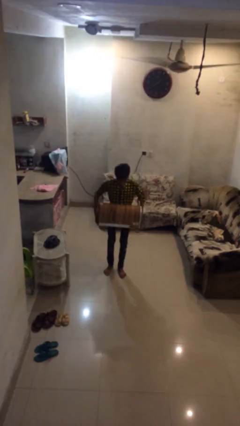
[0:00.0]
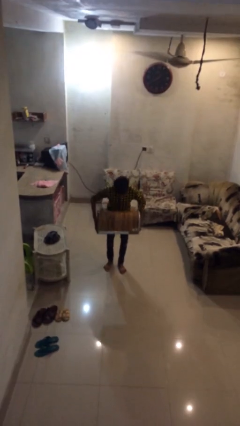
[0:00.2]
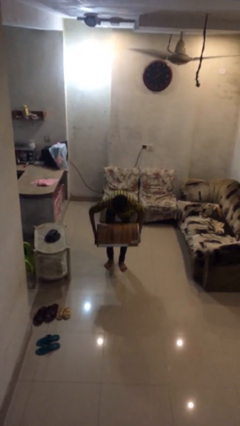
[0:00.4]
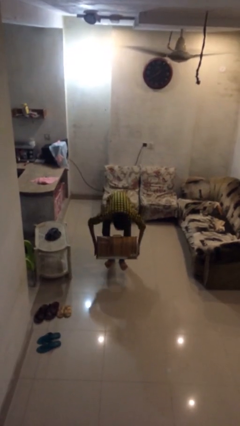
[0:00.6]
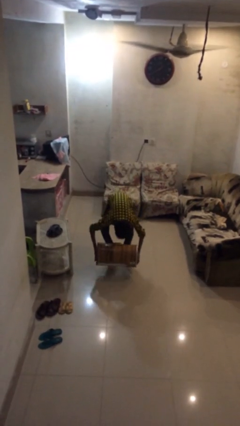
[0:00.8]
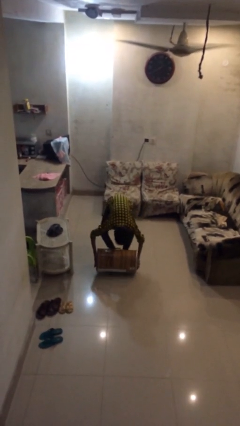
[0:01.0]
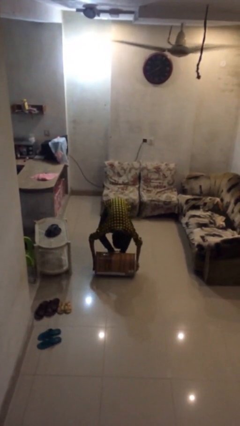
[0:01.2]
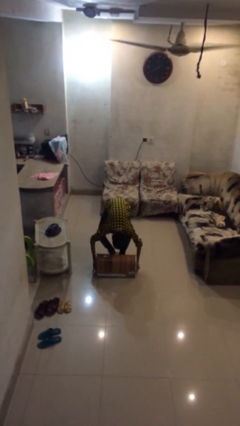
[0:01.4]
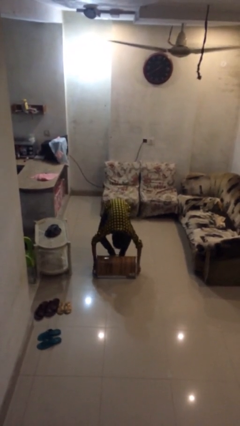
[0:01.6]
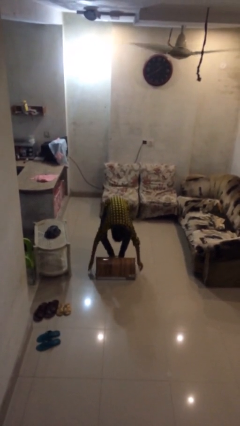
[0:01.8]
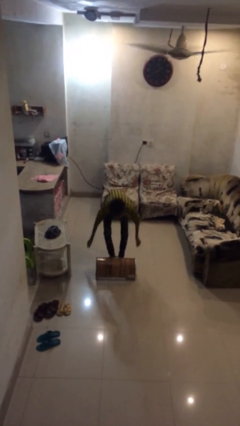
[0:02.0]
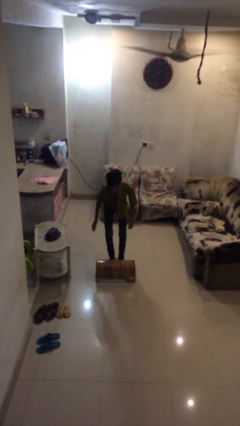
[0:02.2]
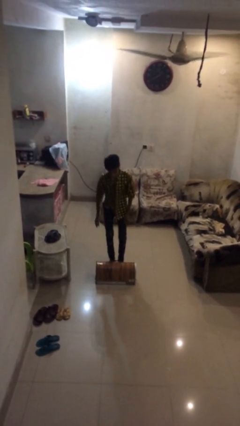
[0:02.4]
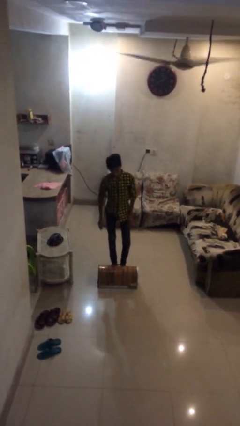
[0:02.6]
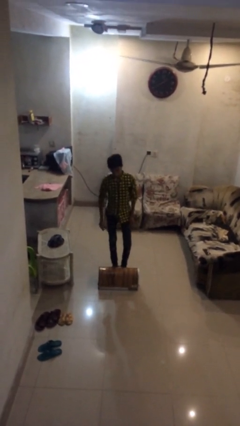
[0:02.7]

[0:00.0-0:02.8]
person puts down object on floor

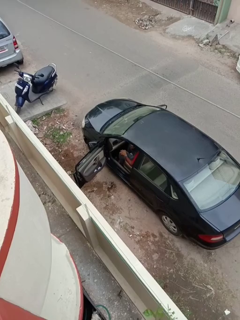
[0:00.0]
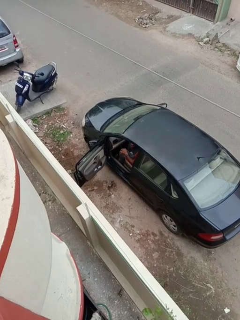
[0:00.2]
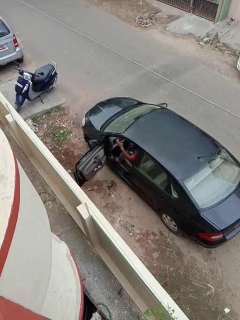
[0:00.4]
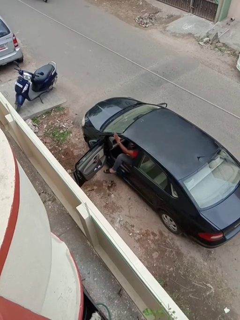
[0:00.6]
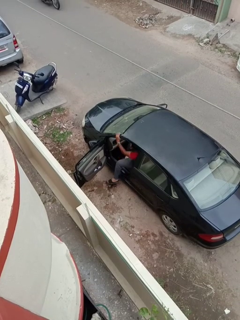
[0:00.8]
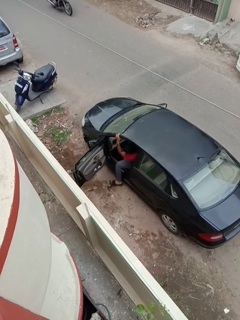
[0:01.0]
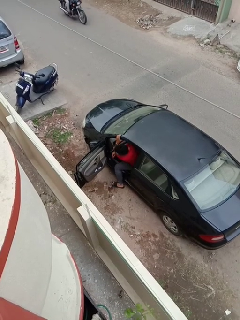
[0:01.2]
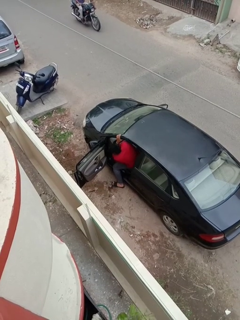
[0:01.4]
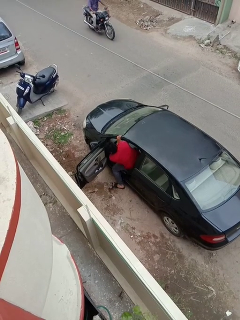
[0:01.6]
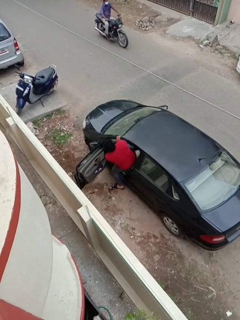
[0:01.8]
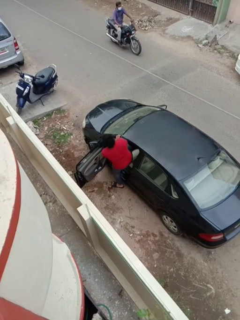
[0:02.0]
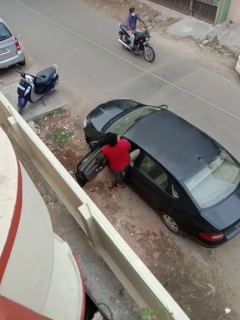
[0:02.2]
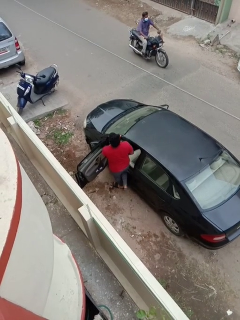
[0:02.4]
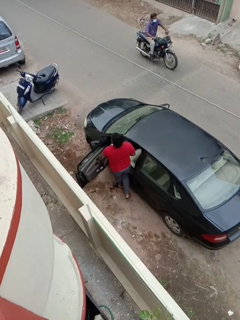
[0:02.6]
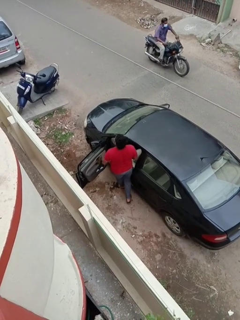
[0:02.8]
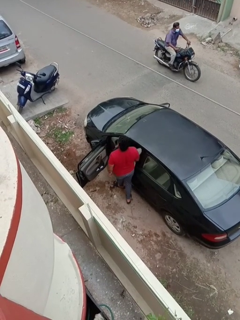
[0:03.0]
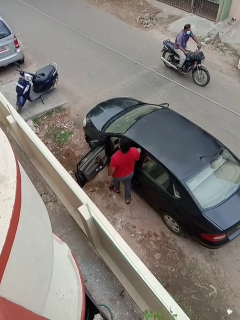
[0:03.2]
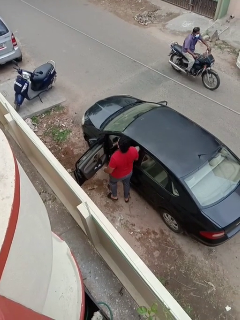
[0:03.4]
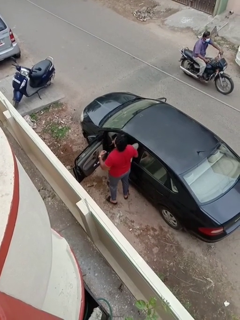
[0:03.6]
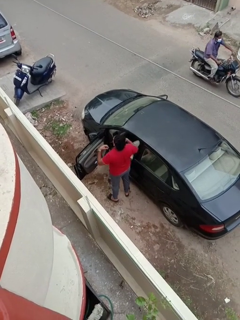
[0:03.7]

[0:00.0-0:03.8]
person exits car

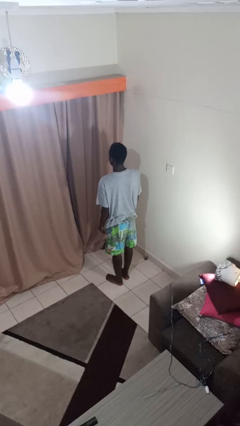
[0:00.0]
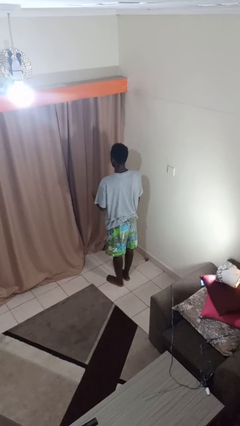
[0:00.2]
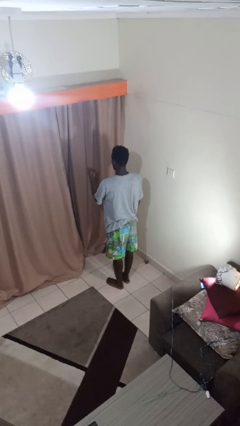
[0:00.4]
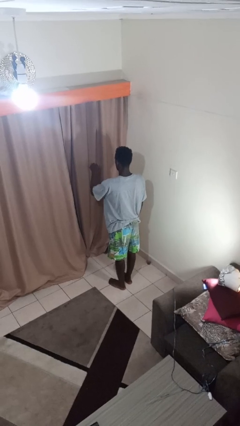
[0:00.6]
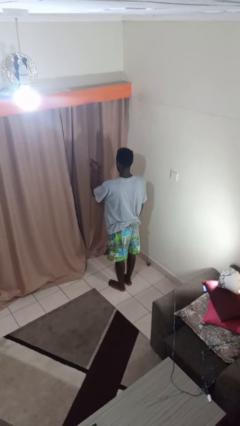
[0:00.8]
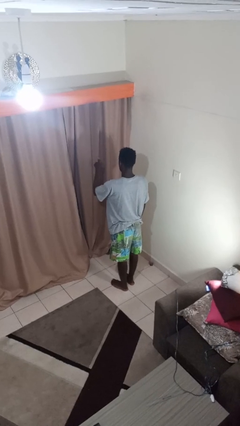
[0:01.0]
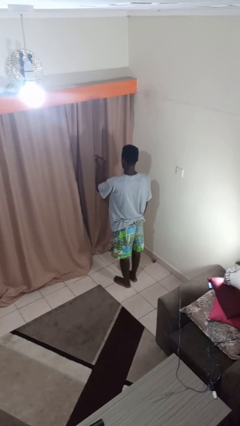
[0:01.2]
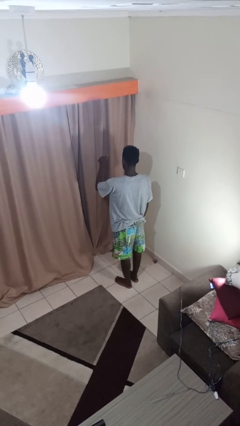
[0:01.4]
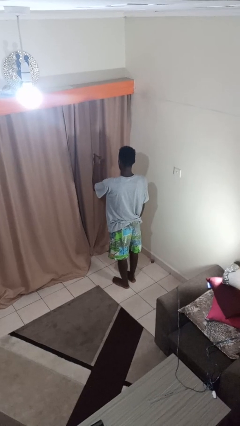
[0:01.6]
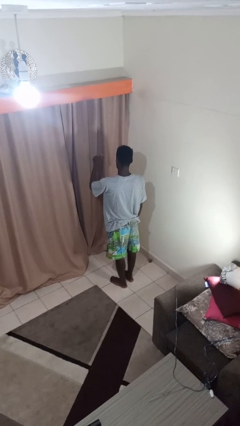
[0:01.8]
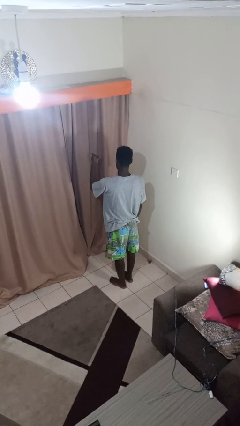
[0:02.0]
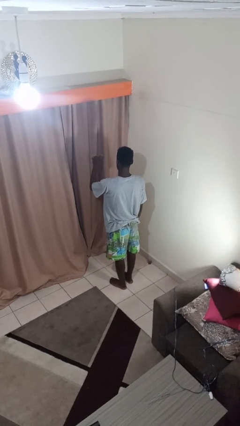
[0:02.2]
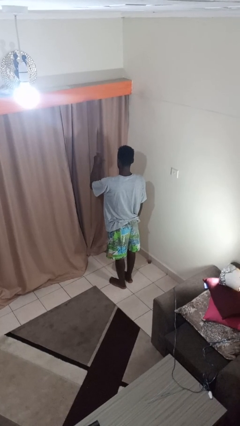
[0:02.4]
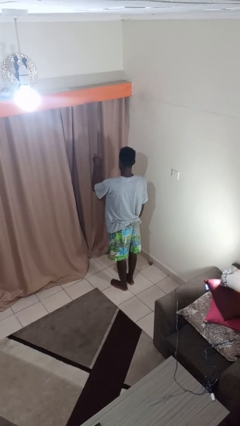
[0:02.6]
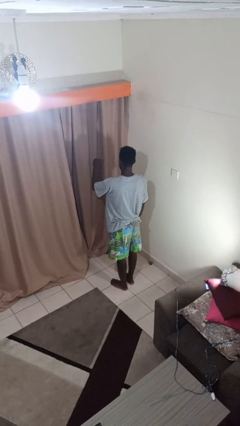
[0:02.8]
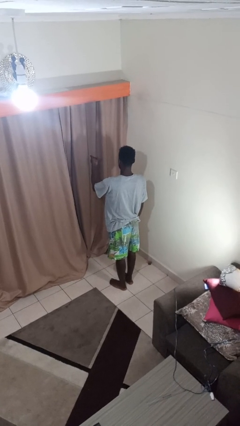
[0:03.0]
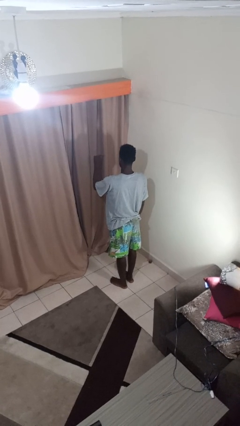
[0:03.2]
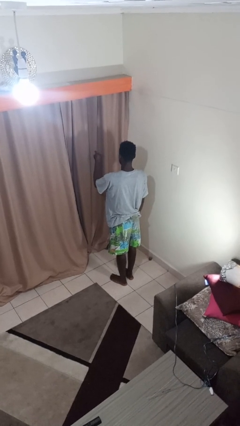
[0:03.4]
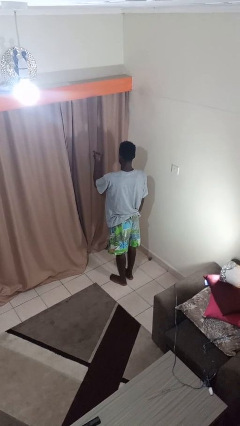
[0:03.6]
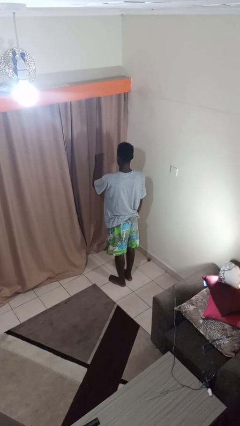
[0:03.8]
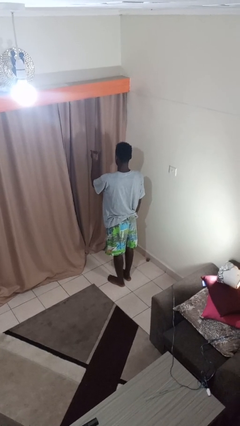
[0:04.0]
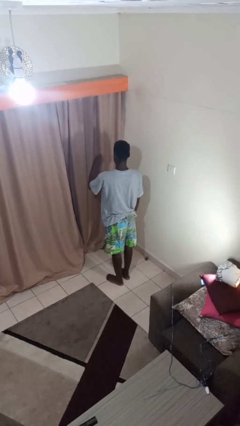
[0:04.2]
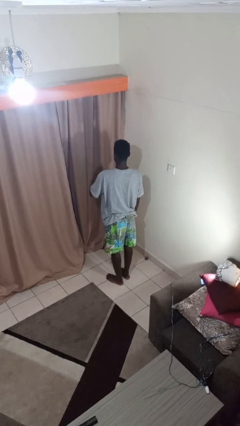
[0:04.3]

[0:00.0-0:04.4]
person gestures hang loose

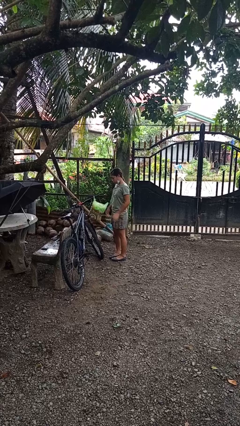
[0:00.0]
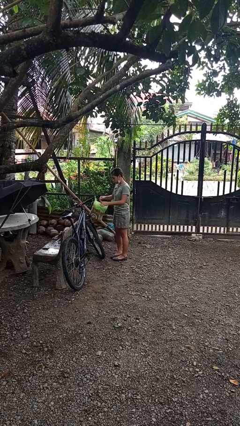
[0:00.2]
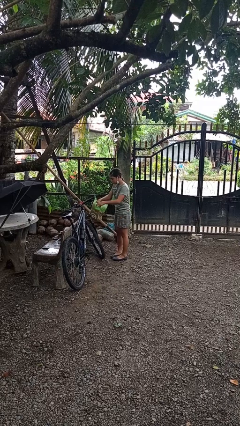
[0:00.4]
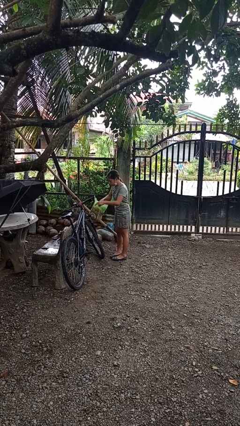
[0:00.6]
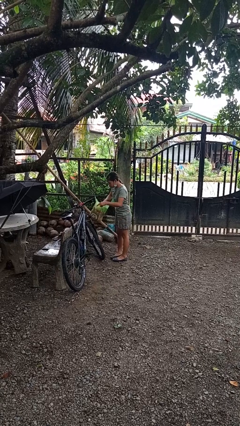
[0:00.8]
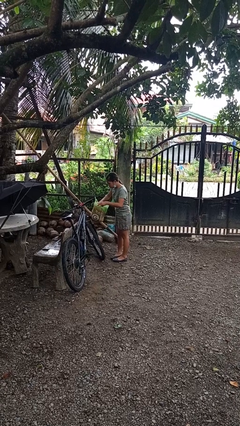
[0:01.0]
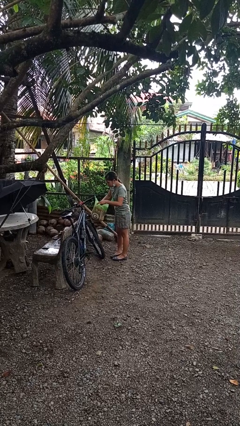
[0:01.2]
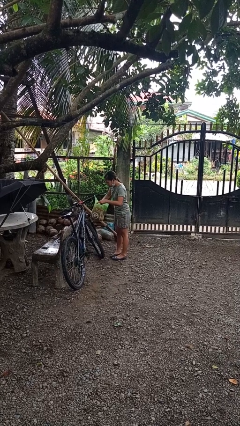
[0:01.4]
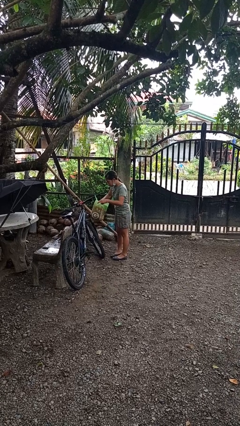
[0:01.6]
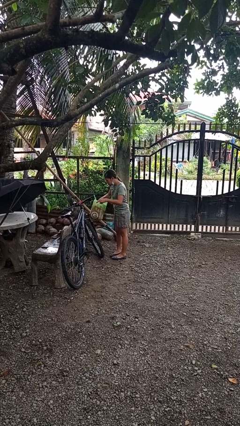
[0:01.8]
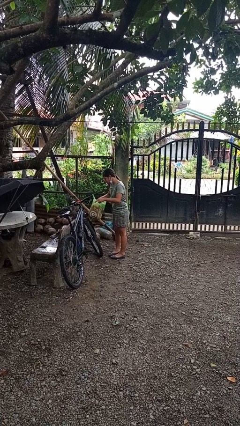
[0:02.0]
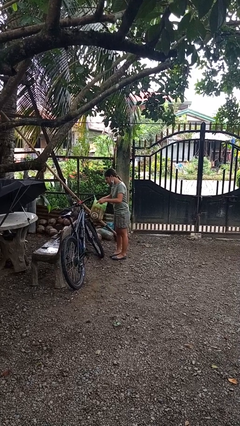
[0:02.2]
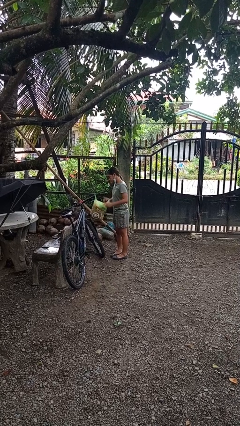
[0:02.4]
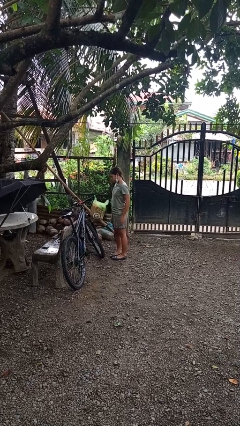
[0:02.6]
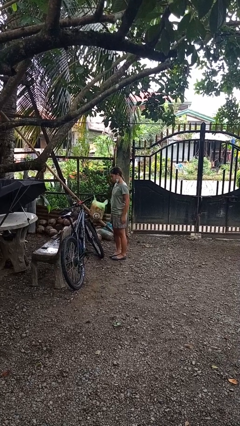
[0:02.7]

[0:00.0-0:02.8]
person searches in bag

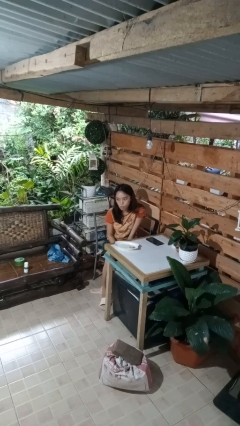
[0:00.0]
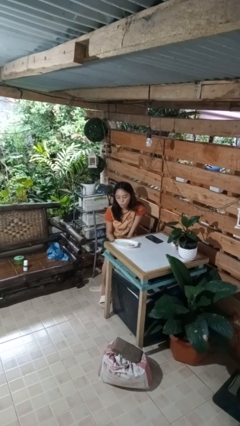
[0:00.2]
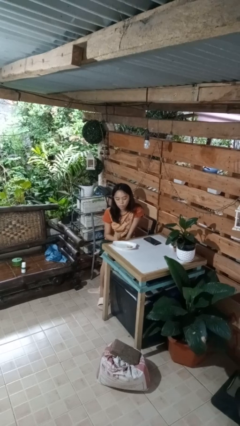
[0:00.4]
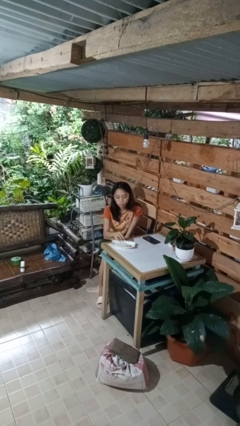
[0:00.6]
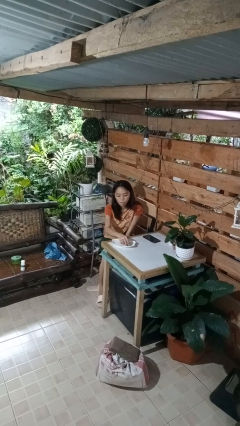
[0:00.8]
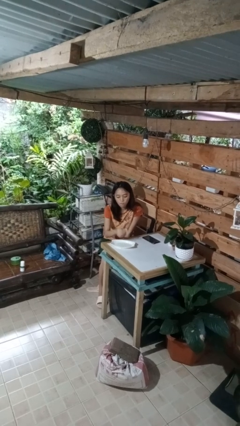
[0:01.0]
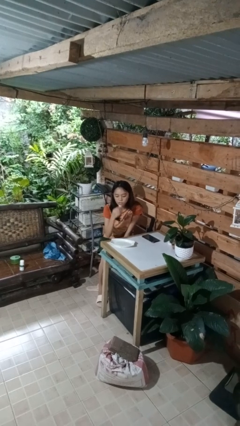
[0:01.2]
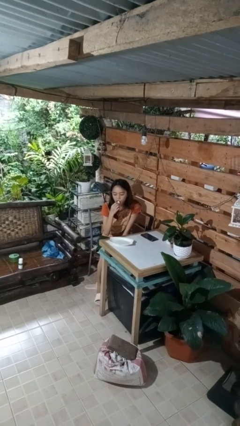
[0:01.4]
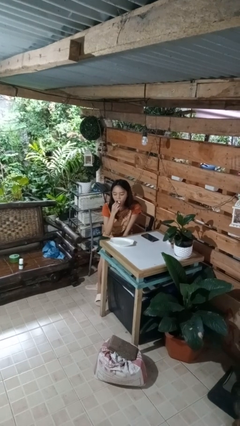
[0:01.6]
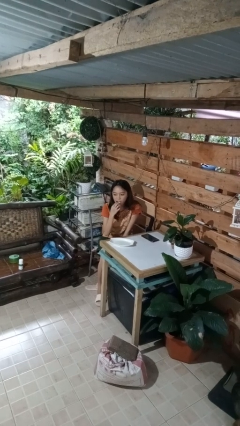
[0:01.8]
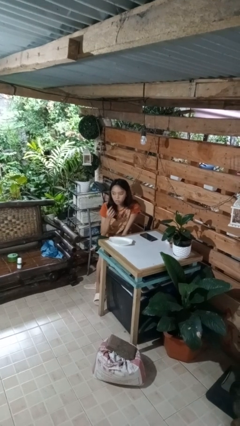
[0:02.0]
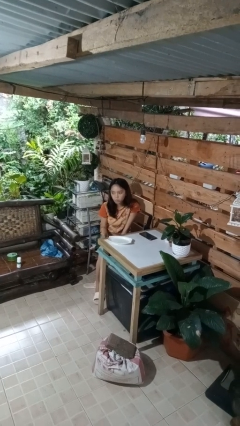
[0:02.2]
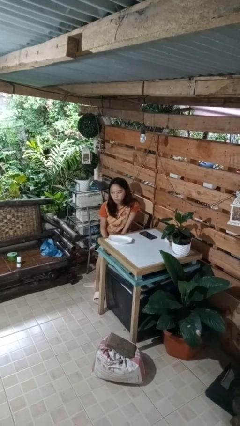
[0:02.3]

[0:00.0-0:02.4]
person eats with hands

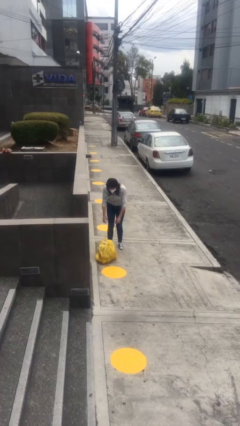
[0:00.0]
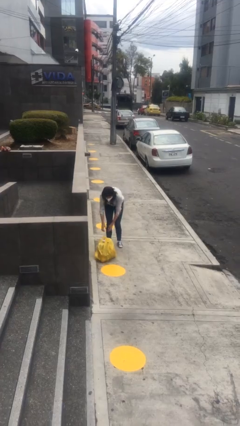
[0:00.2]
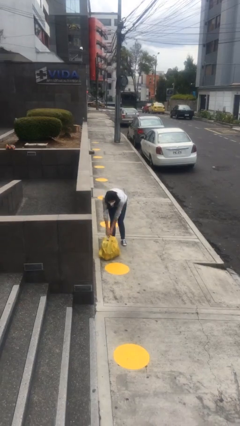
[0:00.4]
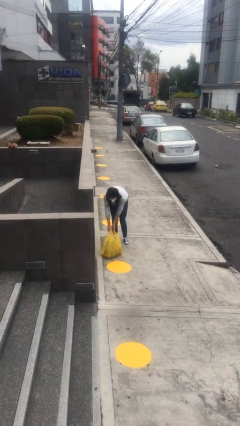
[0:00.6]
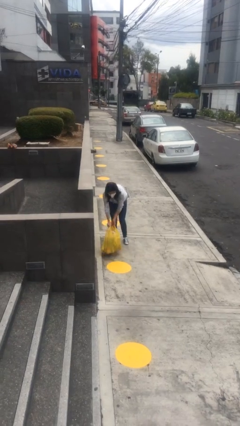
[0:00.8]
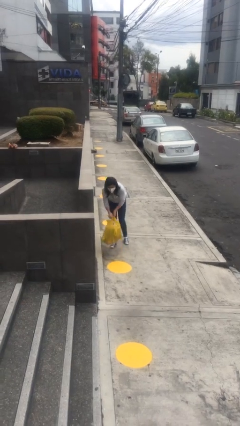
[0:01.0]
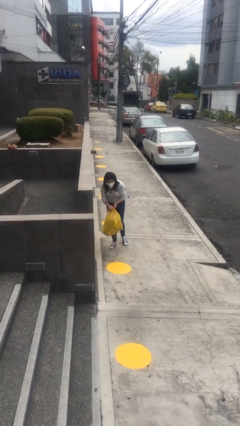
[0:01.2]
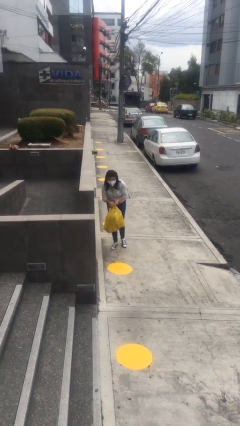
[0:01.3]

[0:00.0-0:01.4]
person picks up object from floor

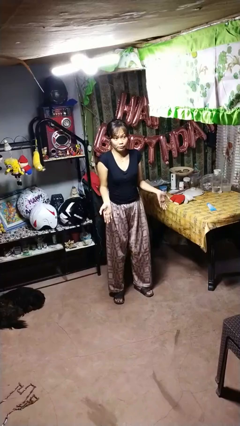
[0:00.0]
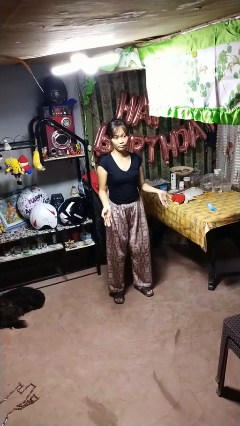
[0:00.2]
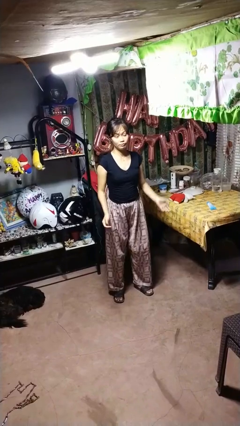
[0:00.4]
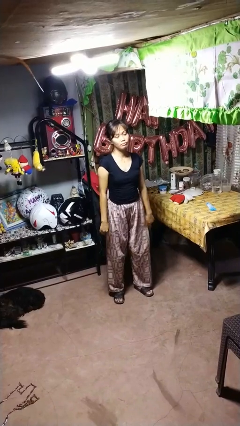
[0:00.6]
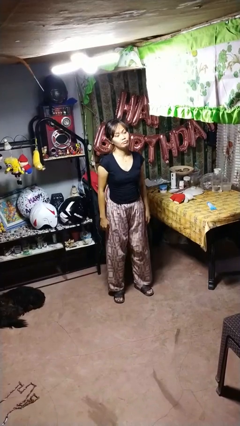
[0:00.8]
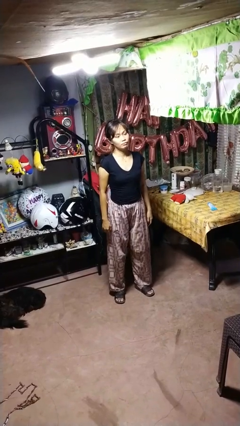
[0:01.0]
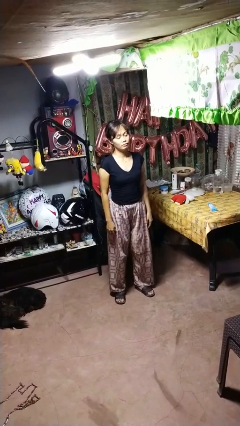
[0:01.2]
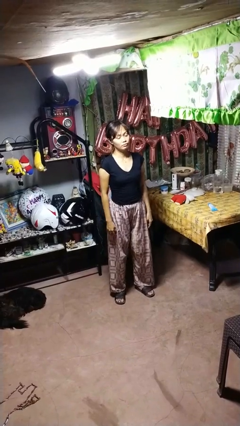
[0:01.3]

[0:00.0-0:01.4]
person shrugs
